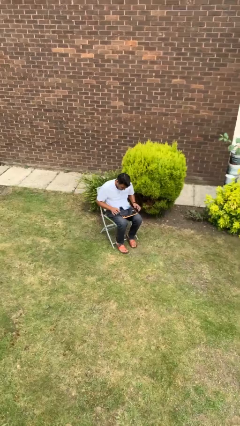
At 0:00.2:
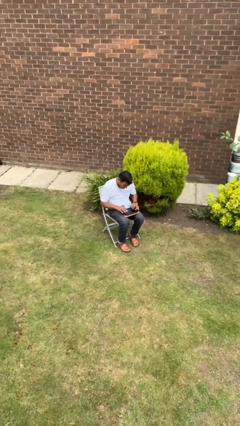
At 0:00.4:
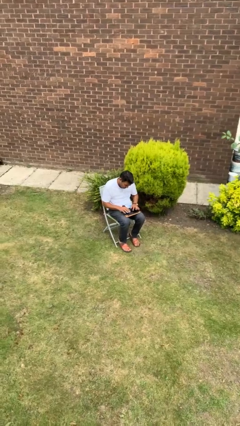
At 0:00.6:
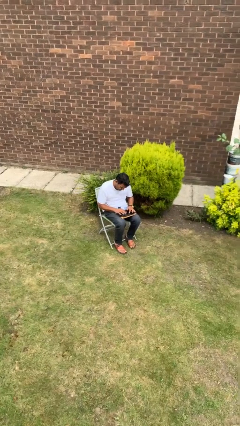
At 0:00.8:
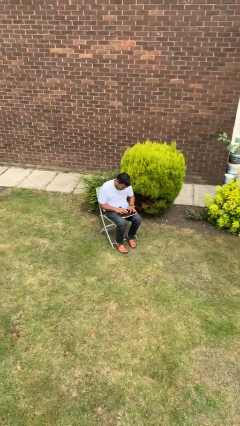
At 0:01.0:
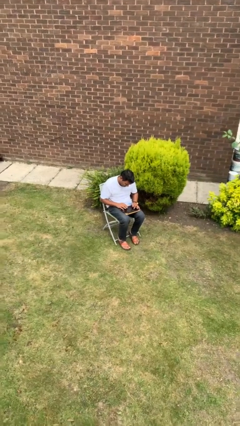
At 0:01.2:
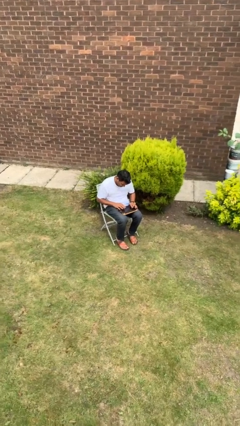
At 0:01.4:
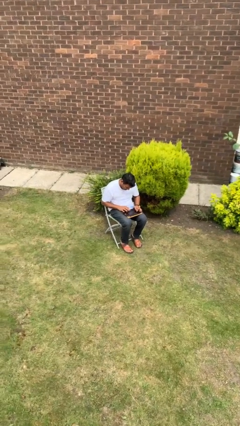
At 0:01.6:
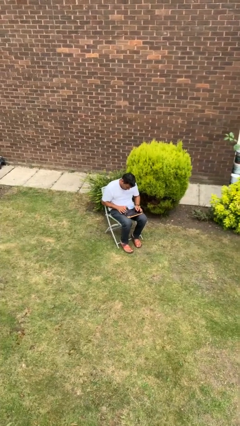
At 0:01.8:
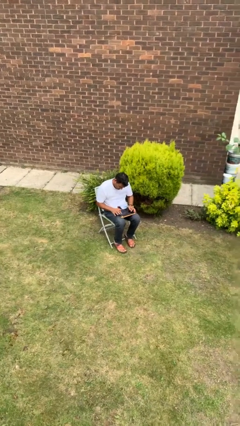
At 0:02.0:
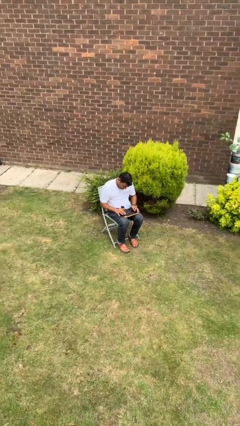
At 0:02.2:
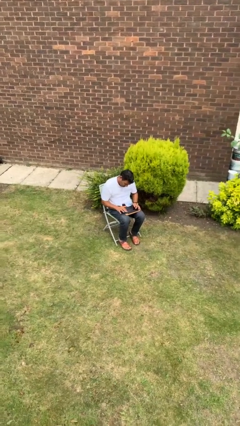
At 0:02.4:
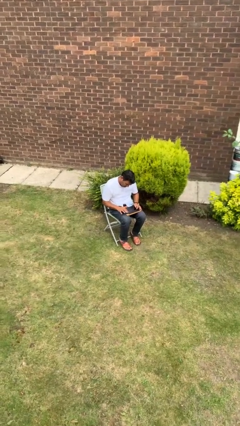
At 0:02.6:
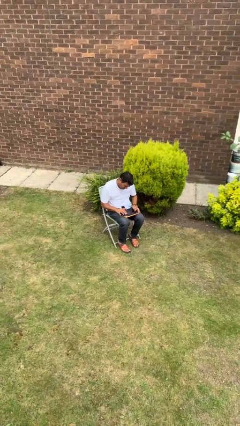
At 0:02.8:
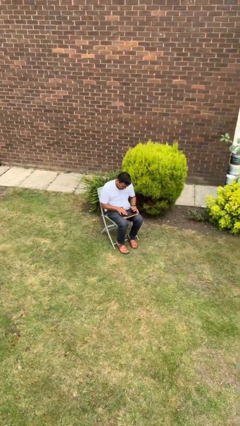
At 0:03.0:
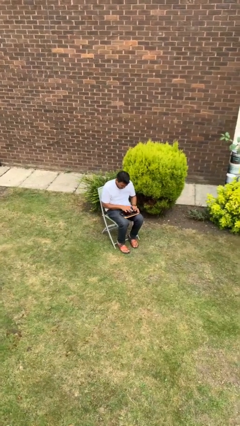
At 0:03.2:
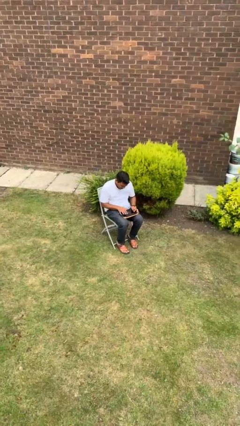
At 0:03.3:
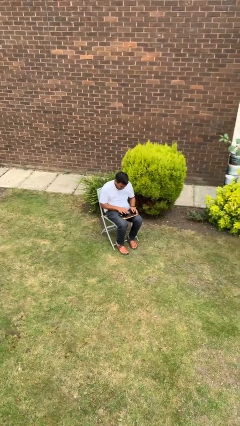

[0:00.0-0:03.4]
person interacts with tablet

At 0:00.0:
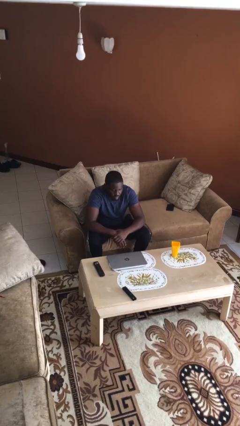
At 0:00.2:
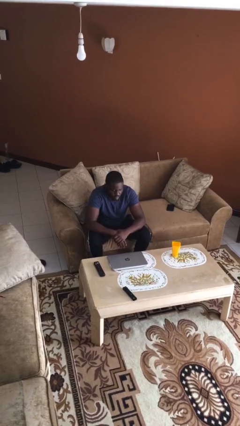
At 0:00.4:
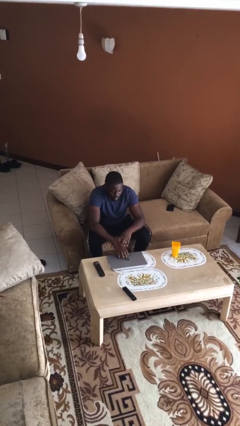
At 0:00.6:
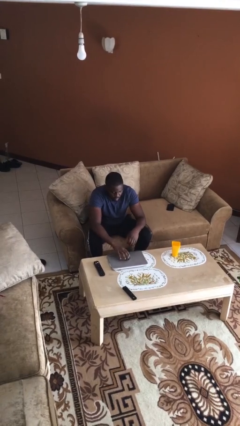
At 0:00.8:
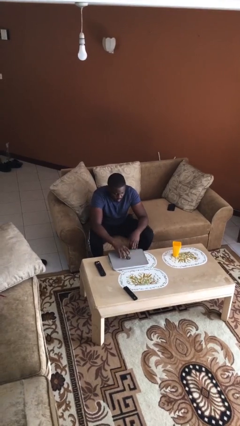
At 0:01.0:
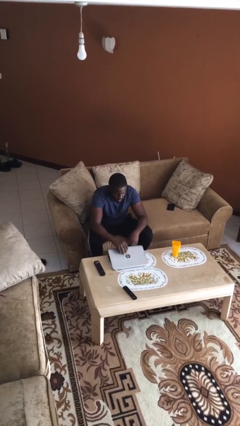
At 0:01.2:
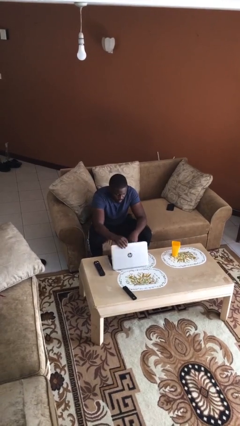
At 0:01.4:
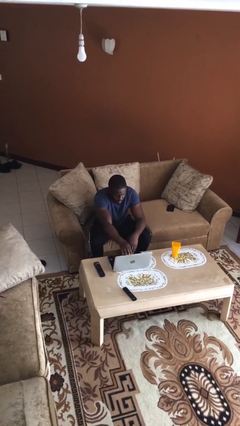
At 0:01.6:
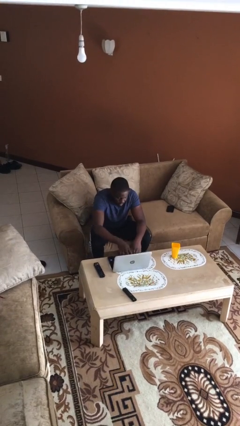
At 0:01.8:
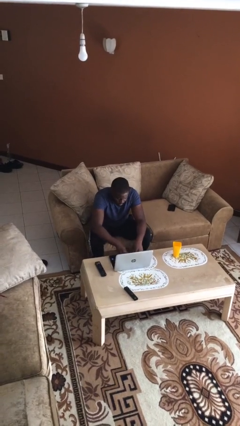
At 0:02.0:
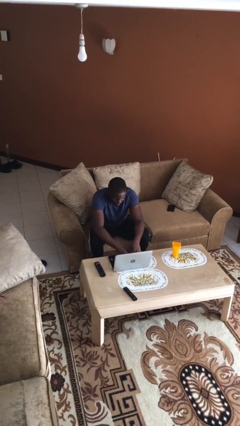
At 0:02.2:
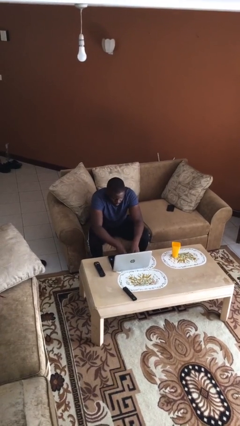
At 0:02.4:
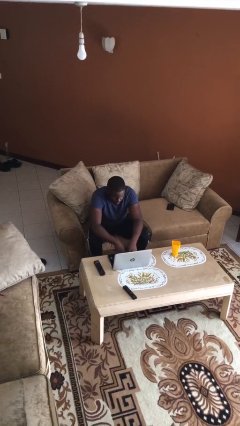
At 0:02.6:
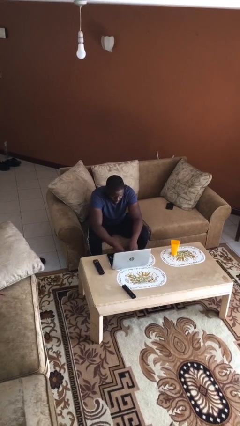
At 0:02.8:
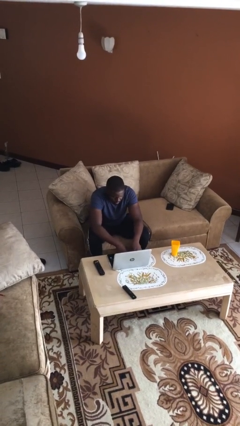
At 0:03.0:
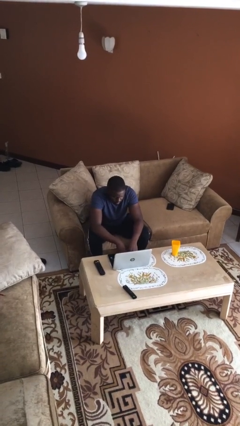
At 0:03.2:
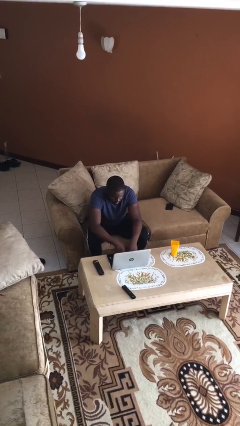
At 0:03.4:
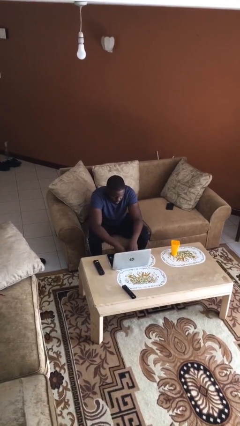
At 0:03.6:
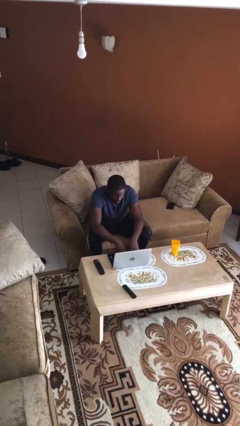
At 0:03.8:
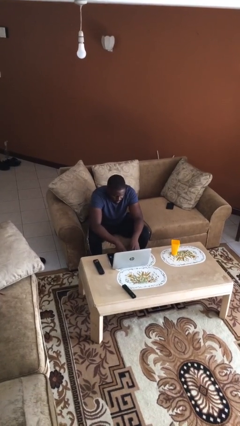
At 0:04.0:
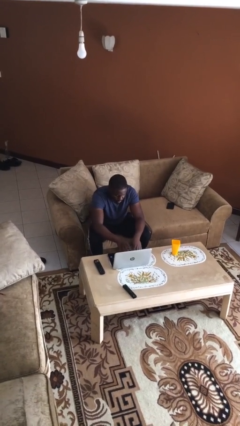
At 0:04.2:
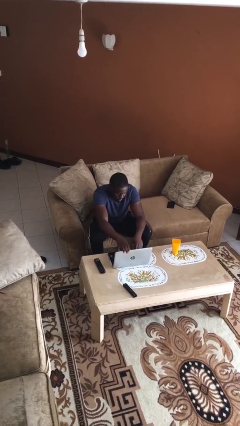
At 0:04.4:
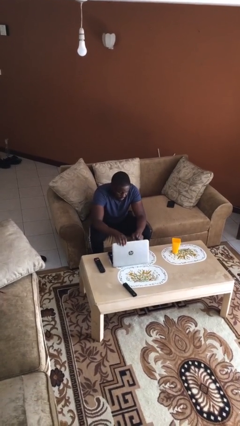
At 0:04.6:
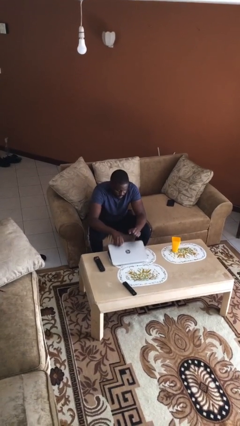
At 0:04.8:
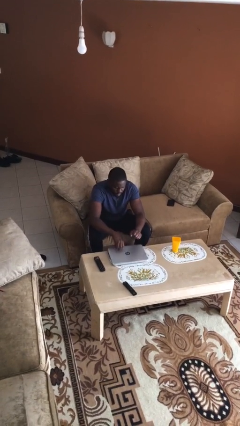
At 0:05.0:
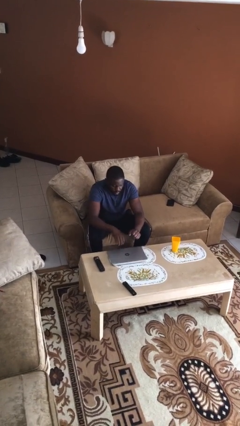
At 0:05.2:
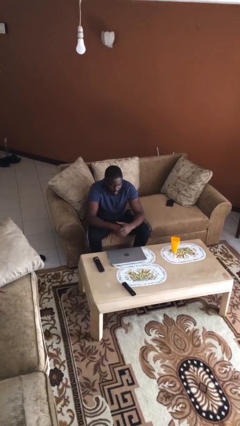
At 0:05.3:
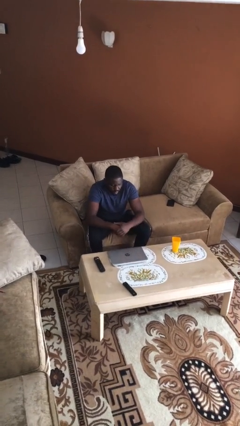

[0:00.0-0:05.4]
person interacts with laptop

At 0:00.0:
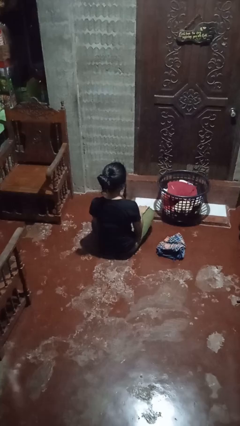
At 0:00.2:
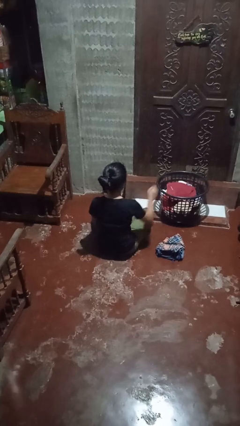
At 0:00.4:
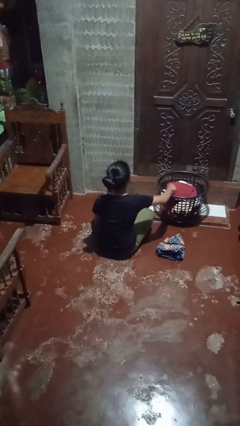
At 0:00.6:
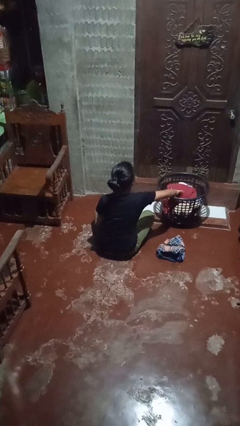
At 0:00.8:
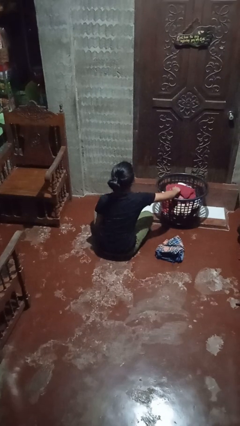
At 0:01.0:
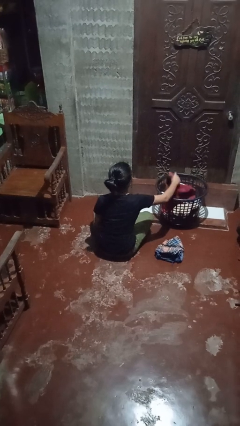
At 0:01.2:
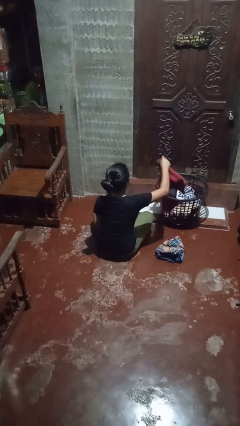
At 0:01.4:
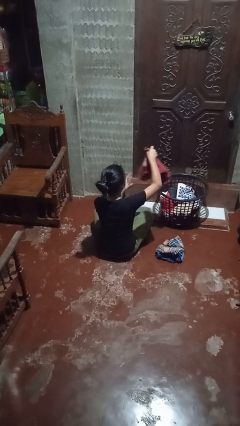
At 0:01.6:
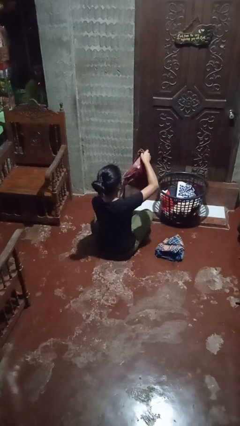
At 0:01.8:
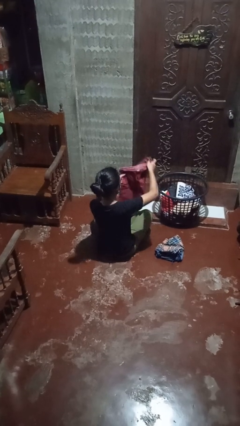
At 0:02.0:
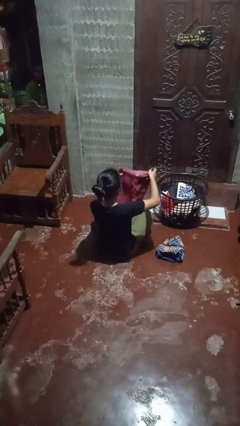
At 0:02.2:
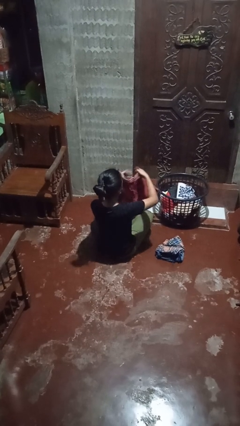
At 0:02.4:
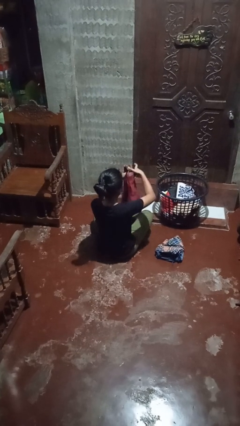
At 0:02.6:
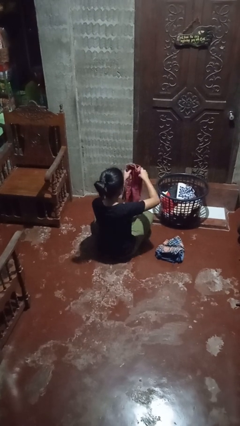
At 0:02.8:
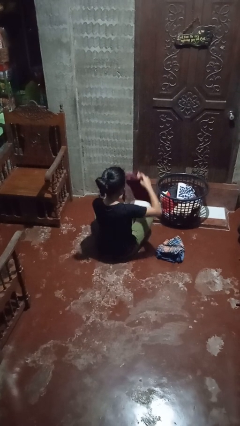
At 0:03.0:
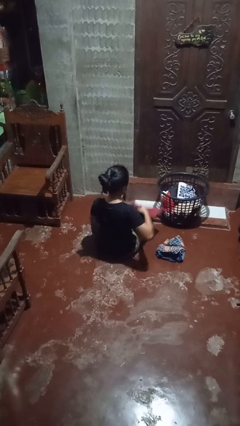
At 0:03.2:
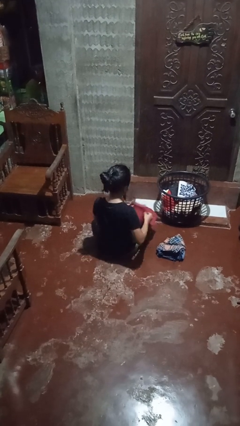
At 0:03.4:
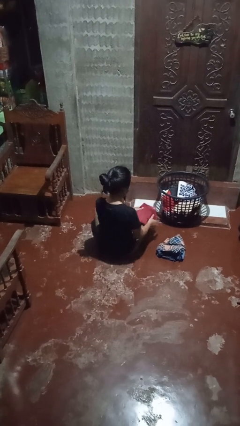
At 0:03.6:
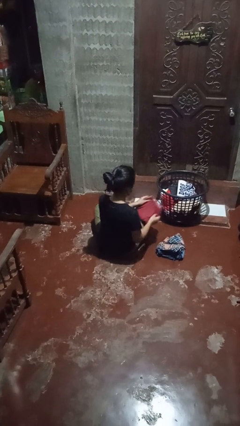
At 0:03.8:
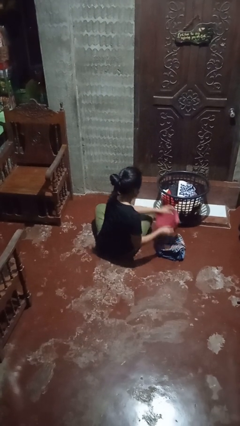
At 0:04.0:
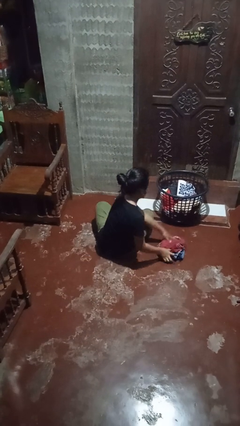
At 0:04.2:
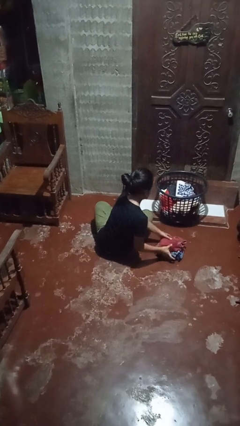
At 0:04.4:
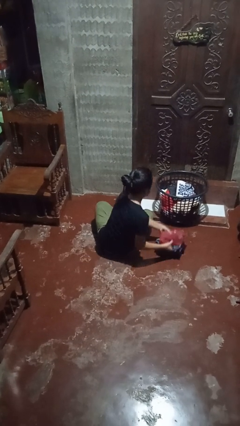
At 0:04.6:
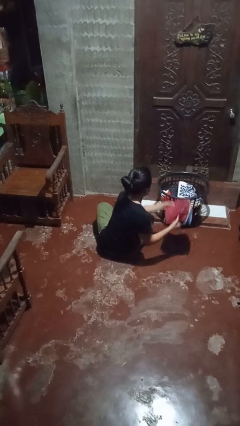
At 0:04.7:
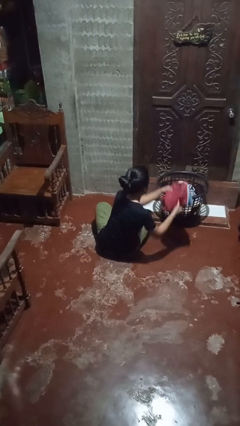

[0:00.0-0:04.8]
person folds pants

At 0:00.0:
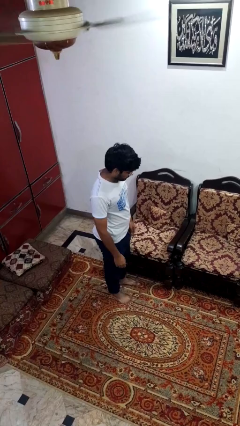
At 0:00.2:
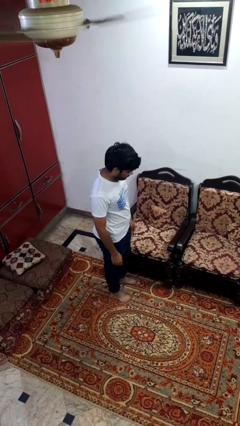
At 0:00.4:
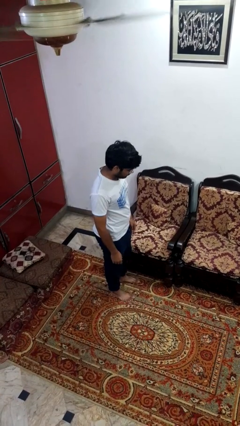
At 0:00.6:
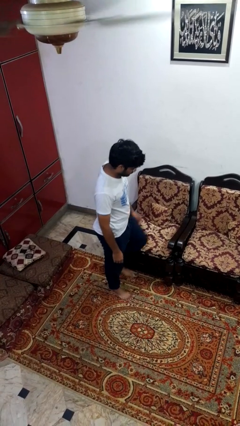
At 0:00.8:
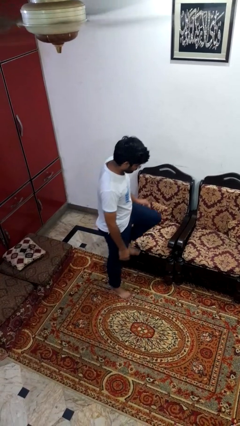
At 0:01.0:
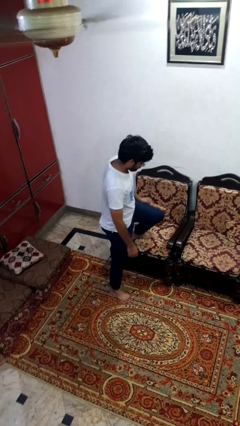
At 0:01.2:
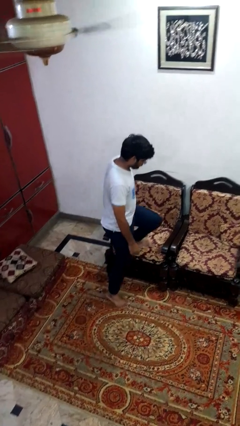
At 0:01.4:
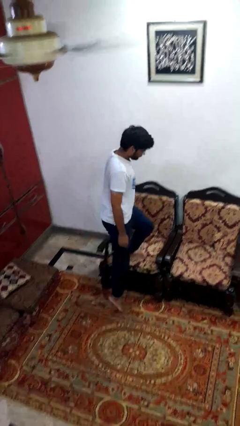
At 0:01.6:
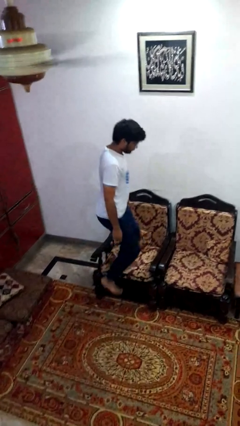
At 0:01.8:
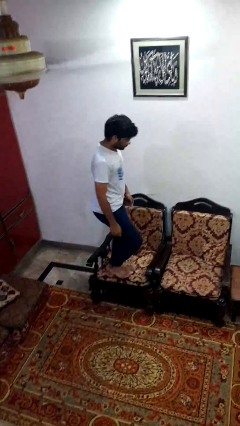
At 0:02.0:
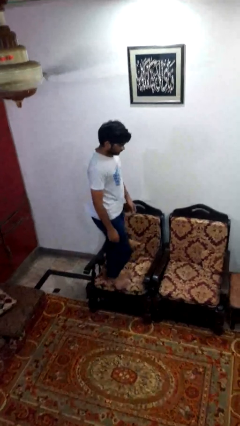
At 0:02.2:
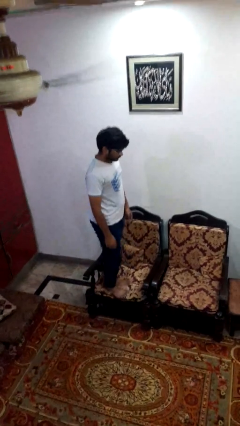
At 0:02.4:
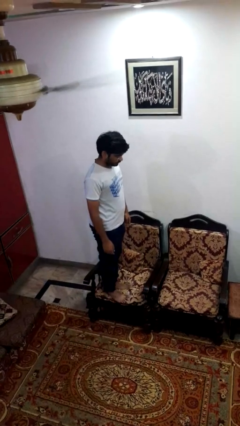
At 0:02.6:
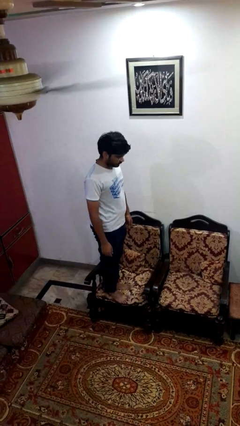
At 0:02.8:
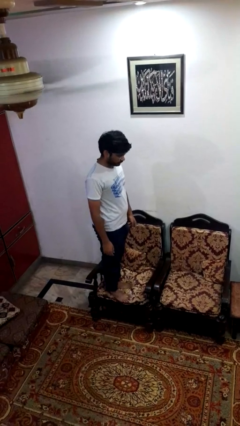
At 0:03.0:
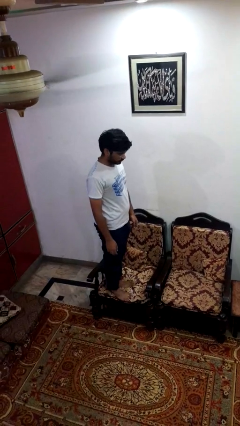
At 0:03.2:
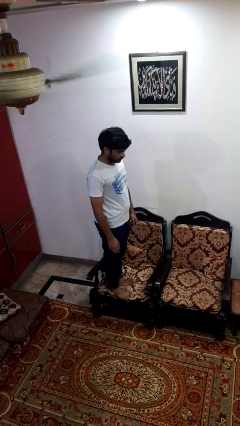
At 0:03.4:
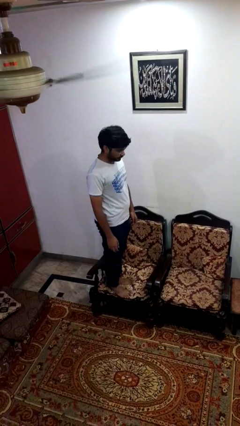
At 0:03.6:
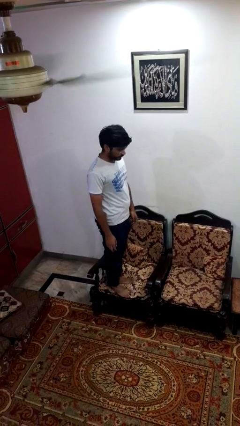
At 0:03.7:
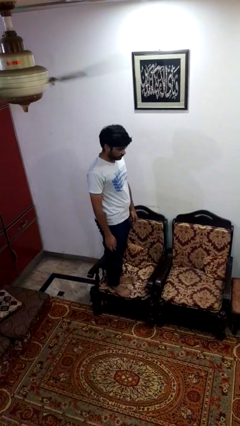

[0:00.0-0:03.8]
person climbs on couch

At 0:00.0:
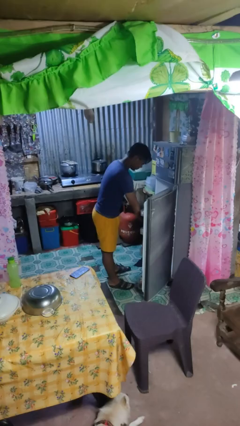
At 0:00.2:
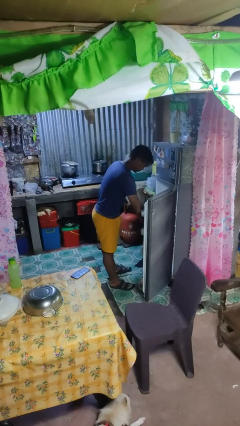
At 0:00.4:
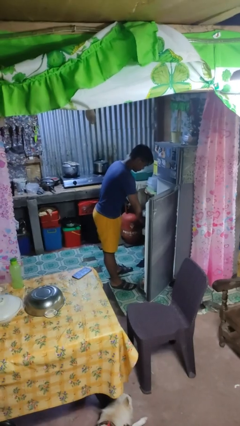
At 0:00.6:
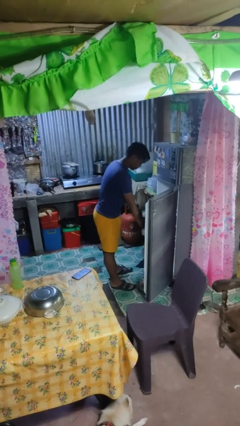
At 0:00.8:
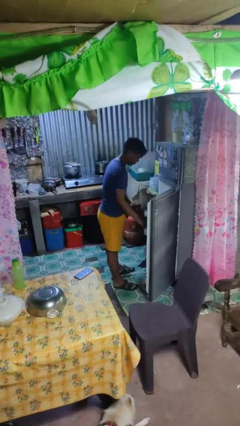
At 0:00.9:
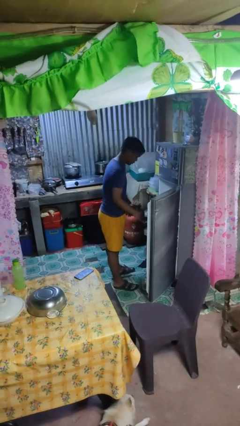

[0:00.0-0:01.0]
person takes object from refrigerator
